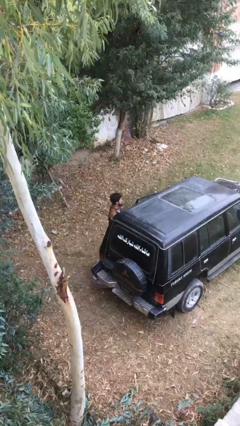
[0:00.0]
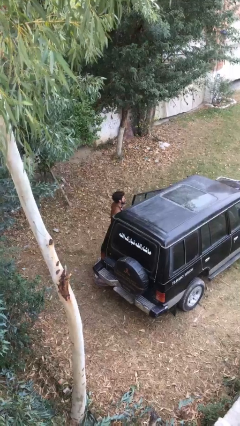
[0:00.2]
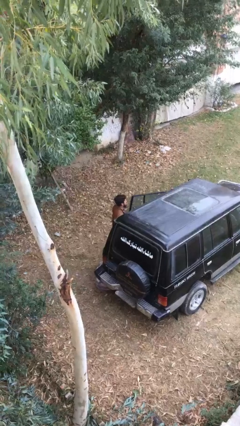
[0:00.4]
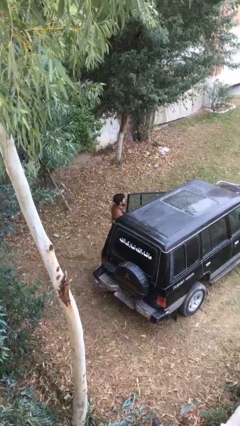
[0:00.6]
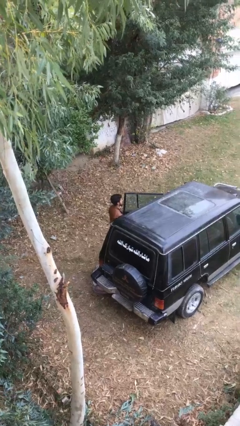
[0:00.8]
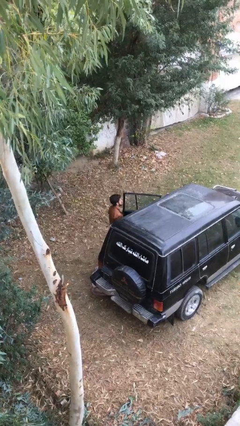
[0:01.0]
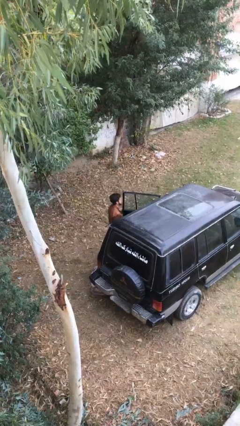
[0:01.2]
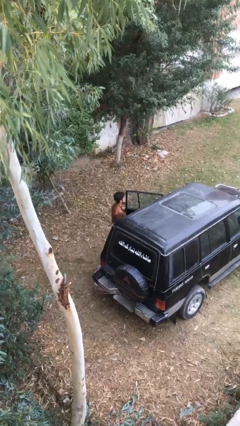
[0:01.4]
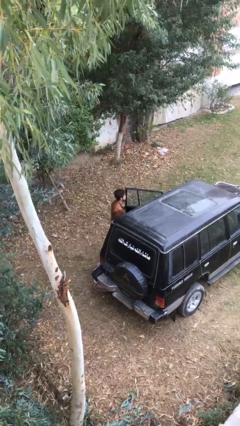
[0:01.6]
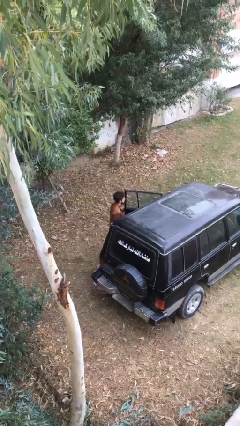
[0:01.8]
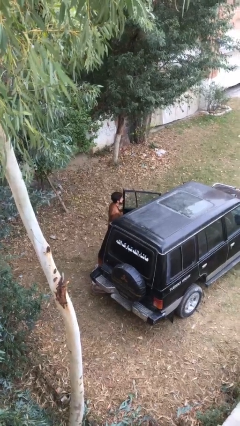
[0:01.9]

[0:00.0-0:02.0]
person opens car door

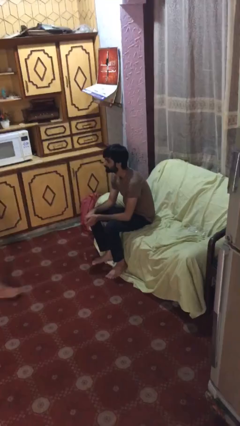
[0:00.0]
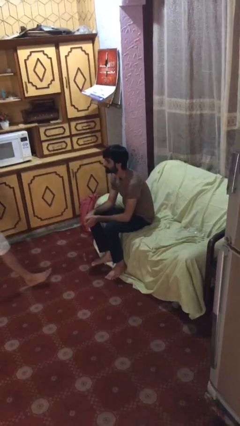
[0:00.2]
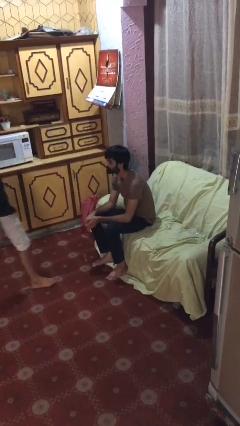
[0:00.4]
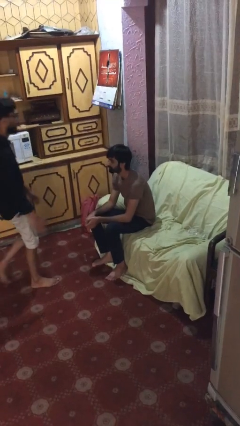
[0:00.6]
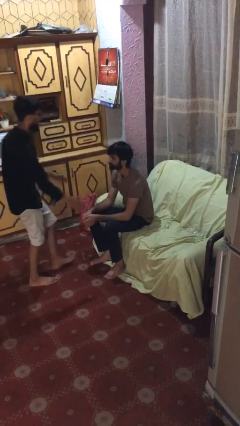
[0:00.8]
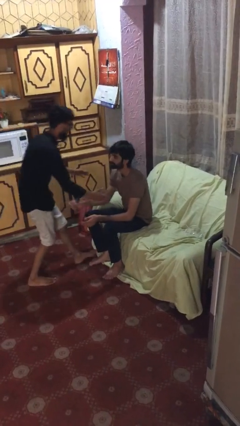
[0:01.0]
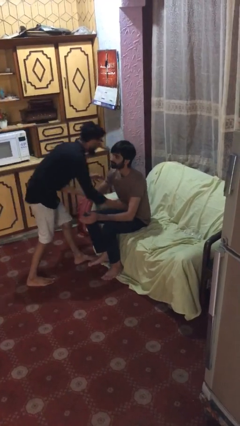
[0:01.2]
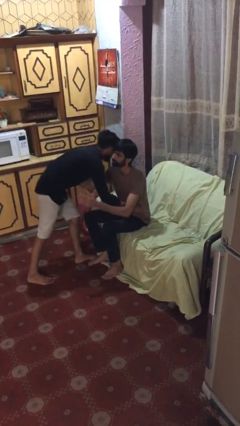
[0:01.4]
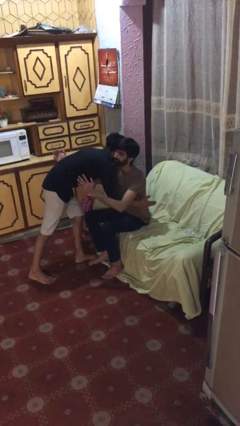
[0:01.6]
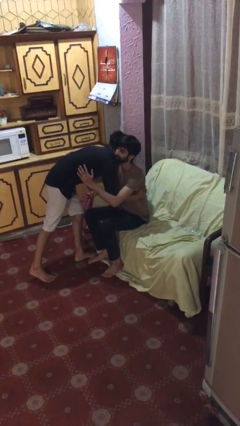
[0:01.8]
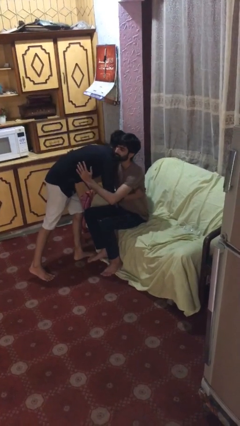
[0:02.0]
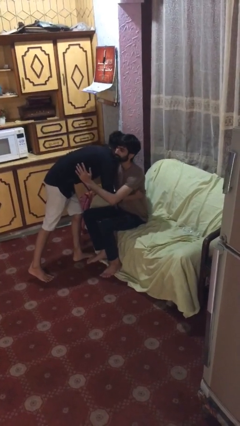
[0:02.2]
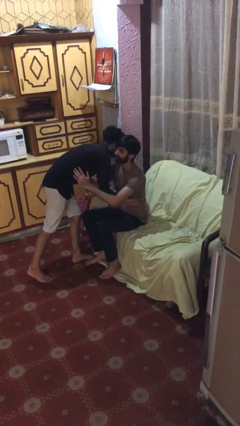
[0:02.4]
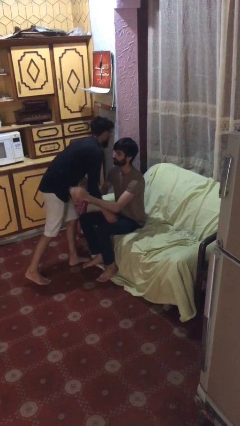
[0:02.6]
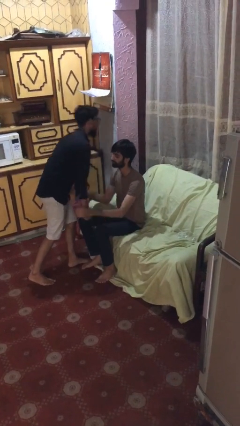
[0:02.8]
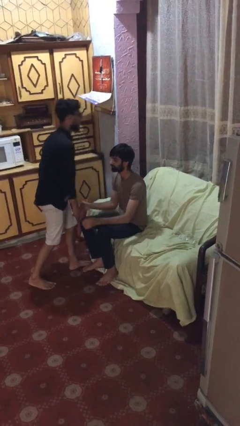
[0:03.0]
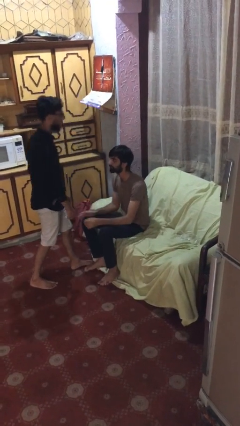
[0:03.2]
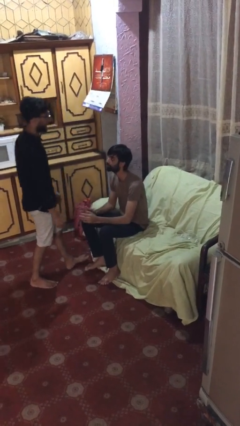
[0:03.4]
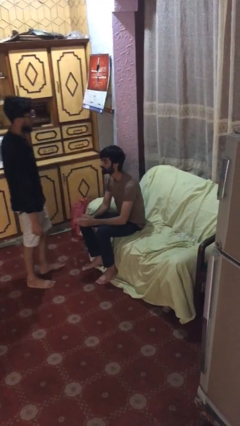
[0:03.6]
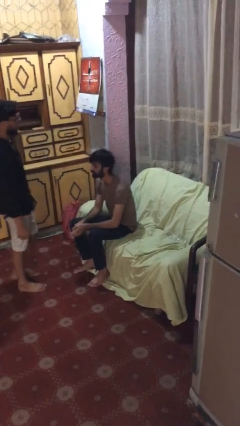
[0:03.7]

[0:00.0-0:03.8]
person embraces person

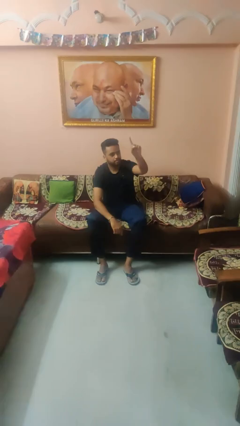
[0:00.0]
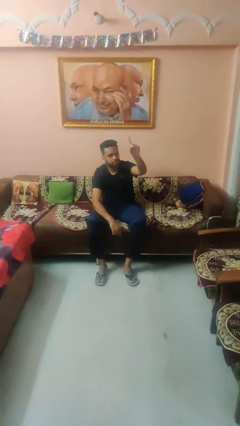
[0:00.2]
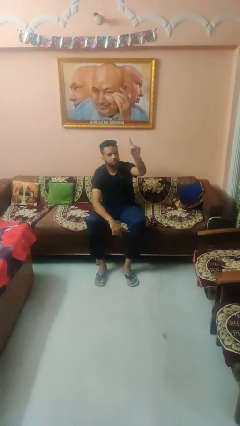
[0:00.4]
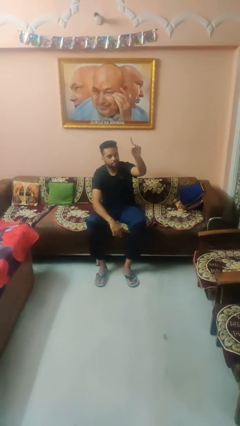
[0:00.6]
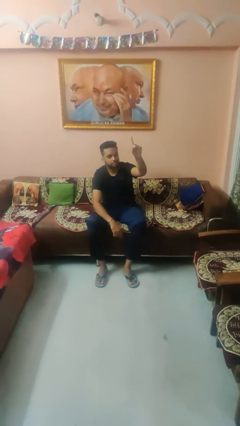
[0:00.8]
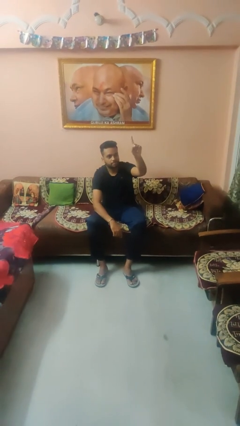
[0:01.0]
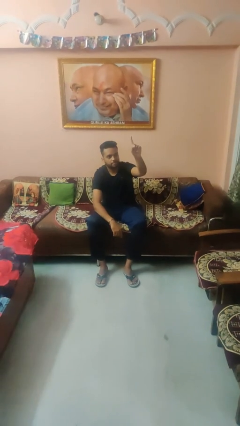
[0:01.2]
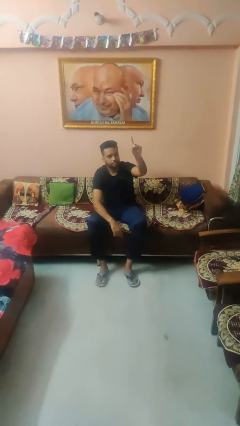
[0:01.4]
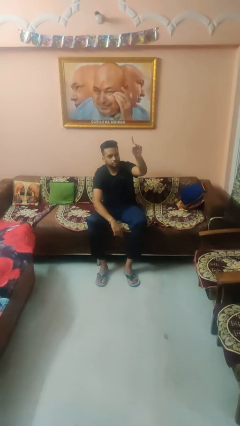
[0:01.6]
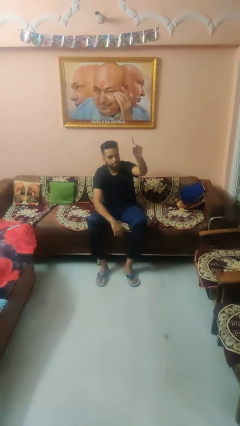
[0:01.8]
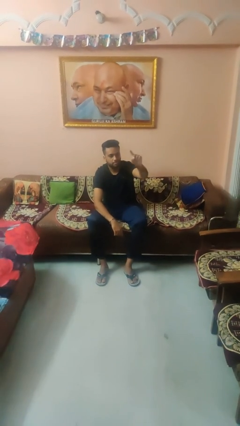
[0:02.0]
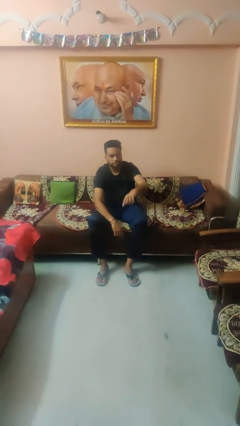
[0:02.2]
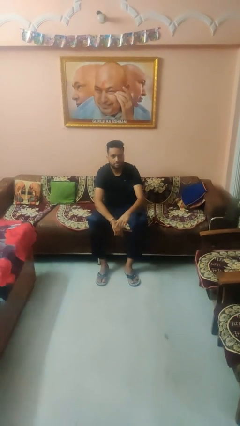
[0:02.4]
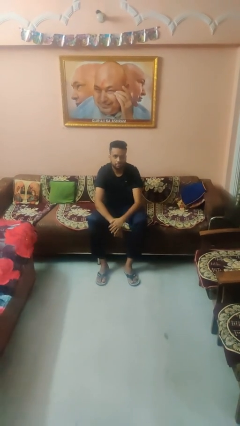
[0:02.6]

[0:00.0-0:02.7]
person gestures number one

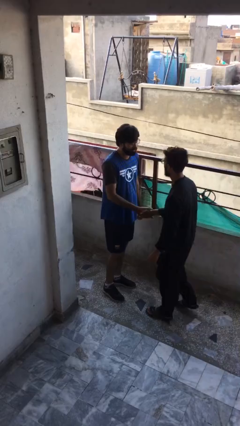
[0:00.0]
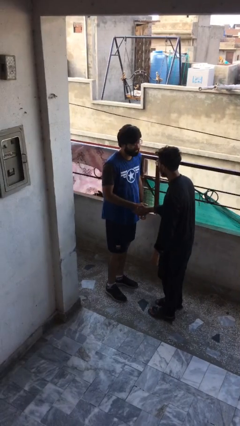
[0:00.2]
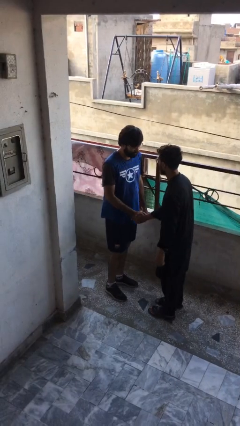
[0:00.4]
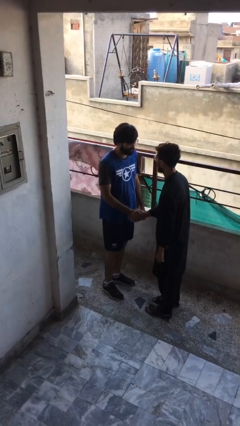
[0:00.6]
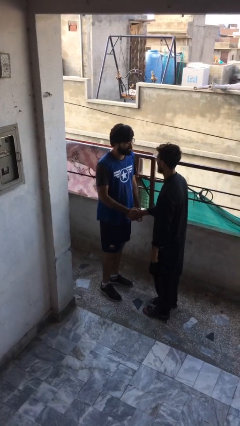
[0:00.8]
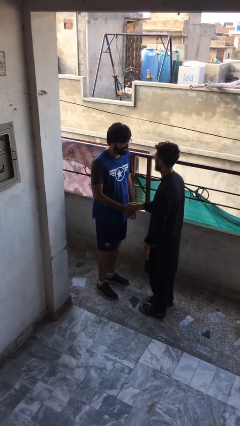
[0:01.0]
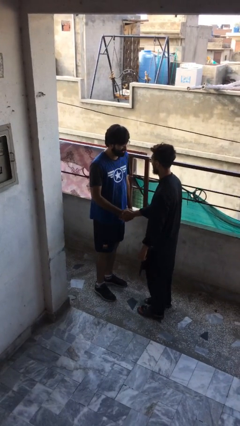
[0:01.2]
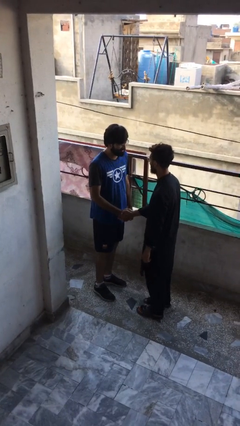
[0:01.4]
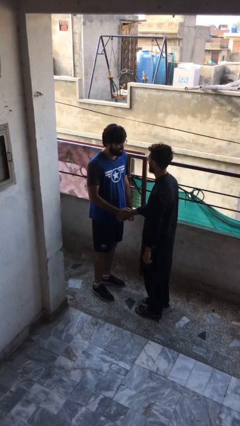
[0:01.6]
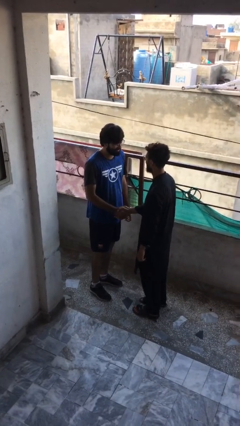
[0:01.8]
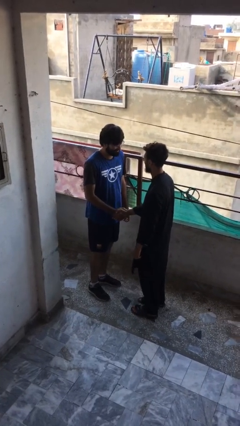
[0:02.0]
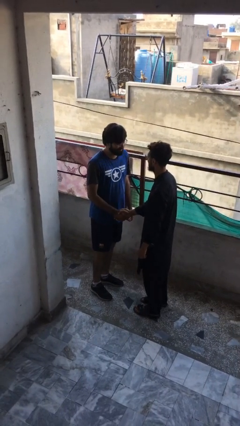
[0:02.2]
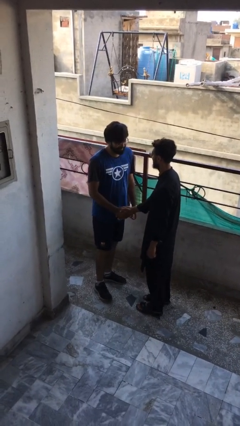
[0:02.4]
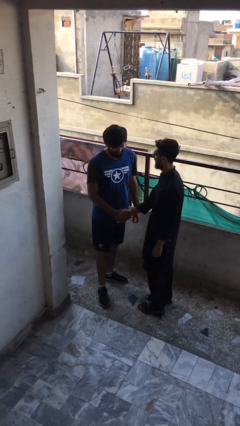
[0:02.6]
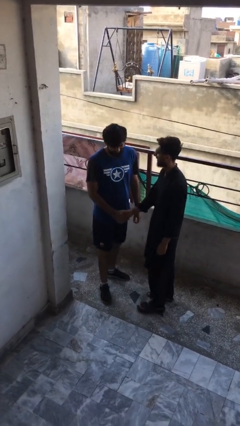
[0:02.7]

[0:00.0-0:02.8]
person shakes hand

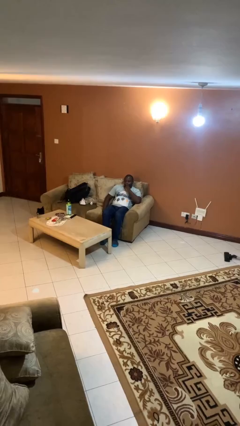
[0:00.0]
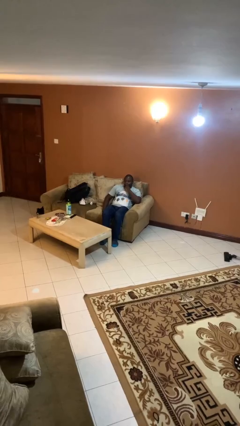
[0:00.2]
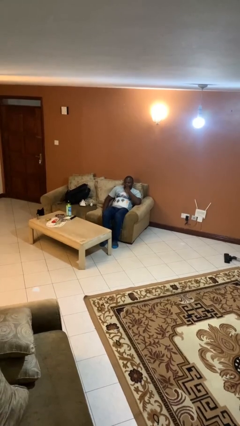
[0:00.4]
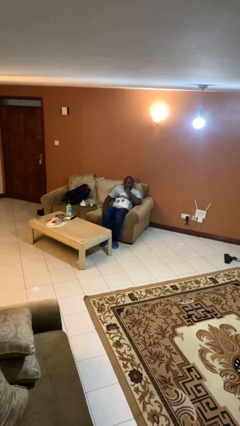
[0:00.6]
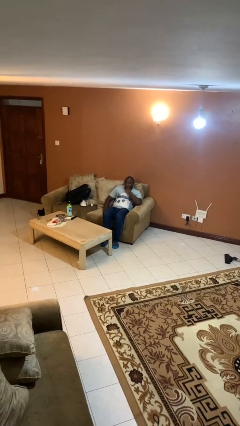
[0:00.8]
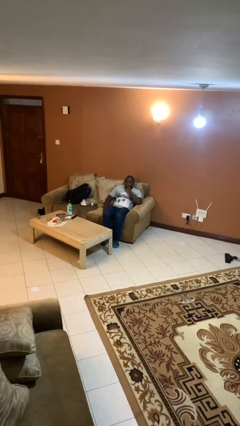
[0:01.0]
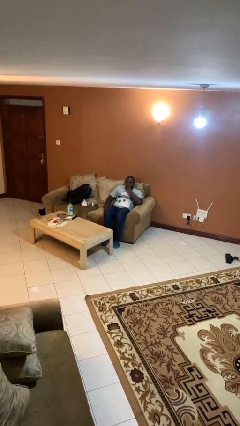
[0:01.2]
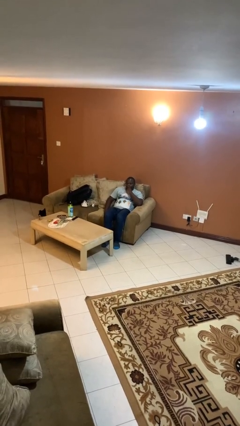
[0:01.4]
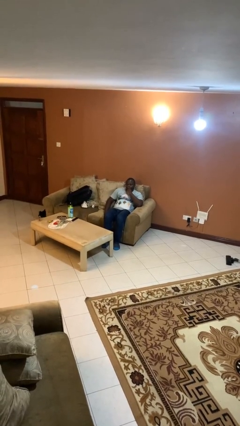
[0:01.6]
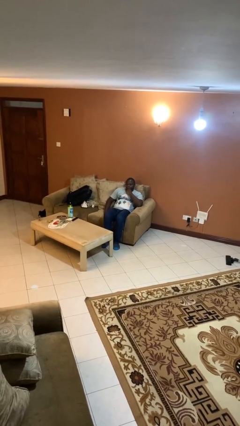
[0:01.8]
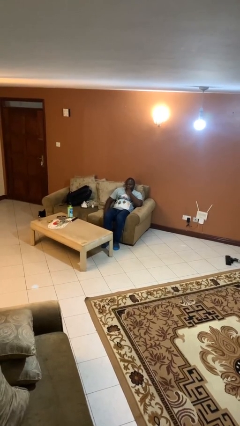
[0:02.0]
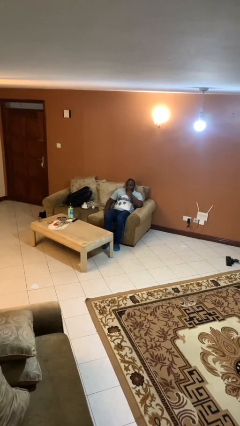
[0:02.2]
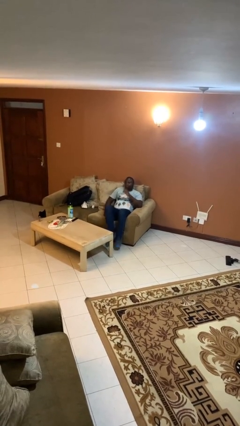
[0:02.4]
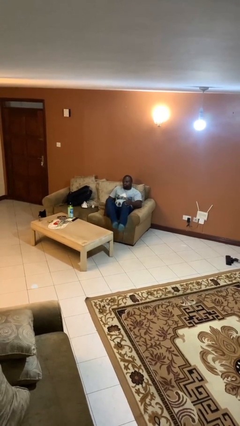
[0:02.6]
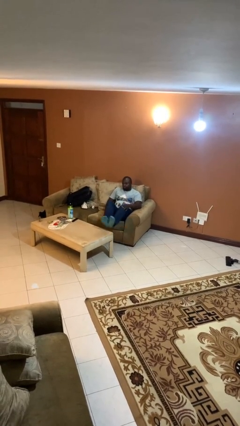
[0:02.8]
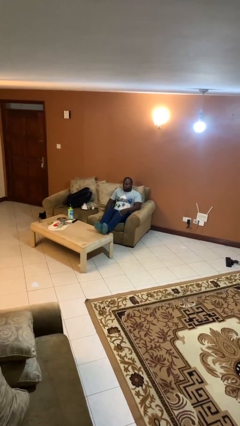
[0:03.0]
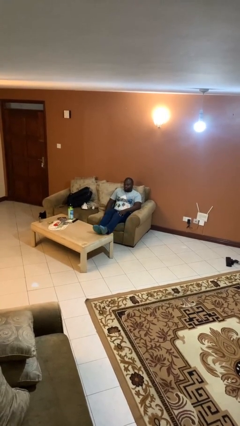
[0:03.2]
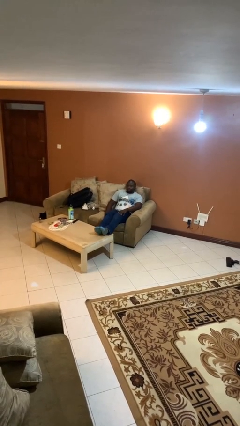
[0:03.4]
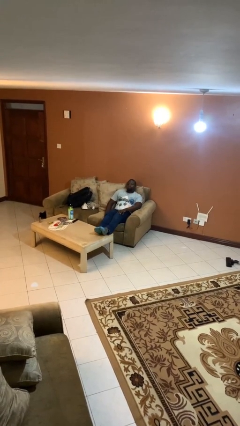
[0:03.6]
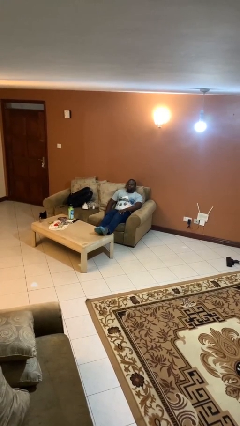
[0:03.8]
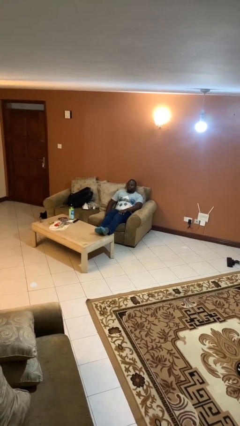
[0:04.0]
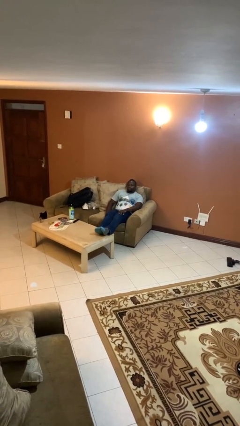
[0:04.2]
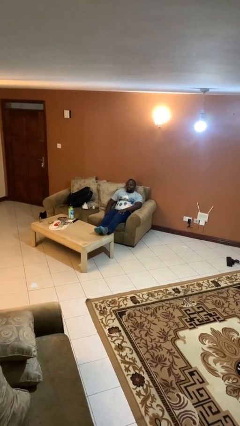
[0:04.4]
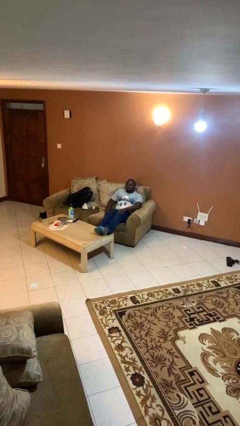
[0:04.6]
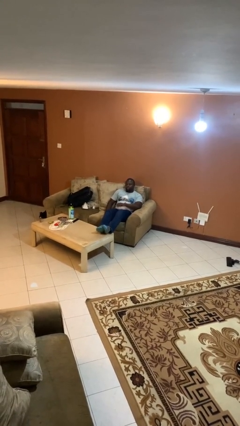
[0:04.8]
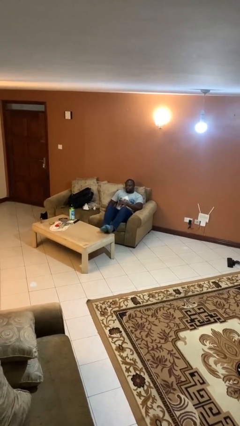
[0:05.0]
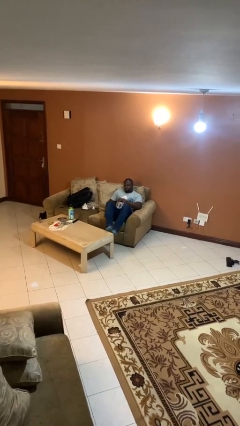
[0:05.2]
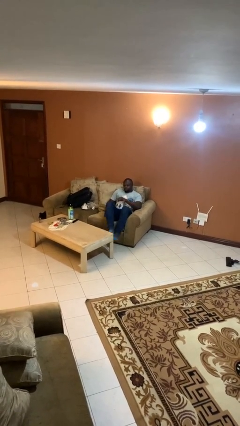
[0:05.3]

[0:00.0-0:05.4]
person puts feet up

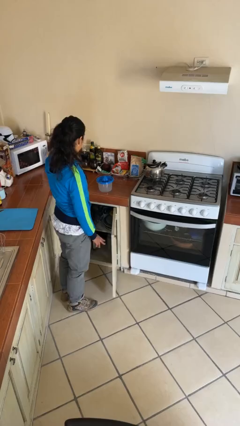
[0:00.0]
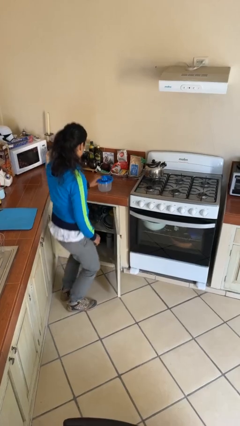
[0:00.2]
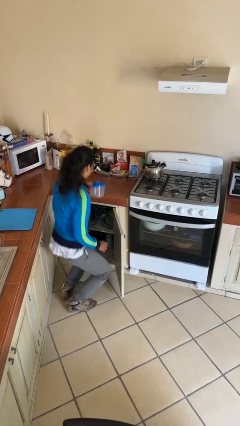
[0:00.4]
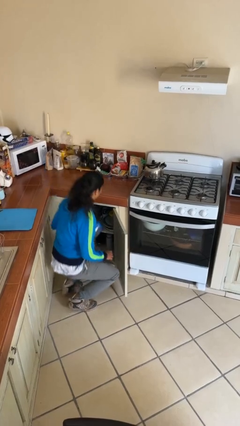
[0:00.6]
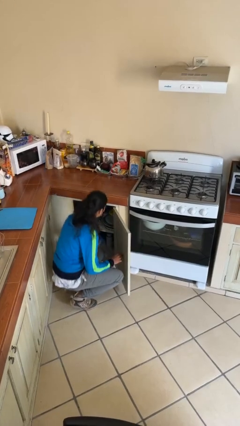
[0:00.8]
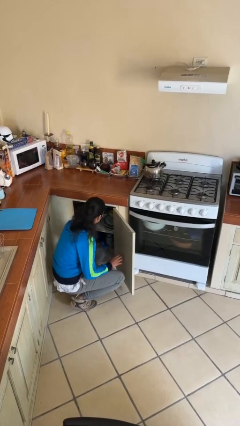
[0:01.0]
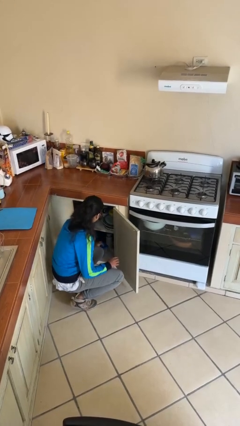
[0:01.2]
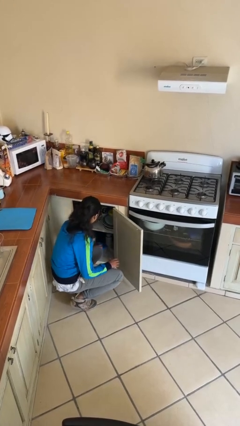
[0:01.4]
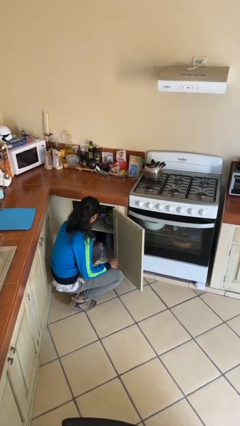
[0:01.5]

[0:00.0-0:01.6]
person puts object in cabinet
